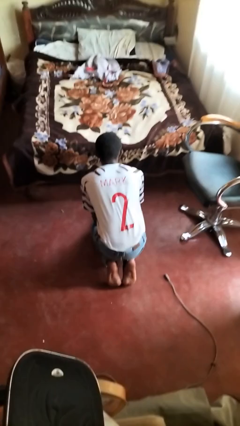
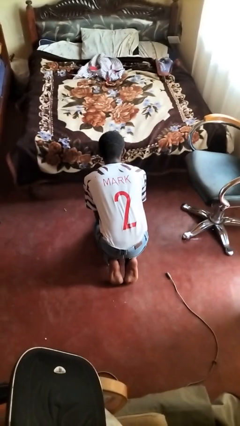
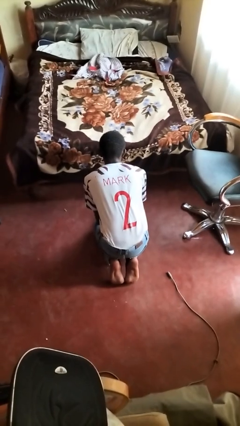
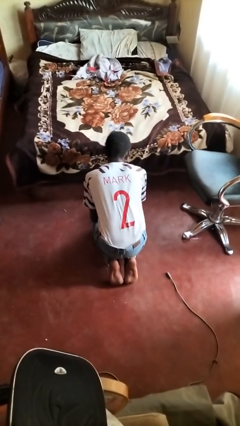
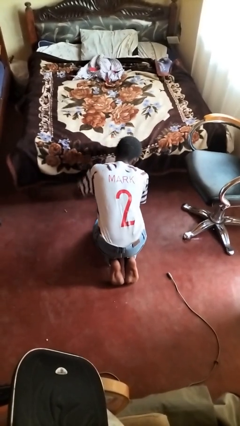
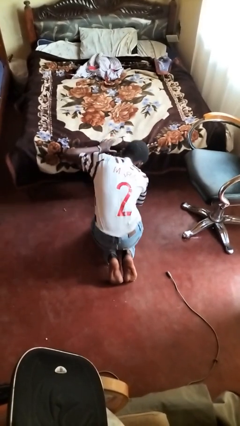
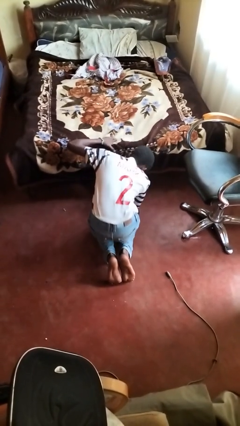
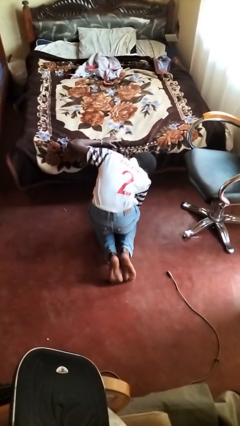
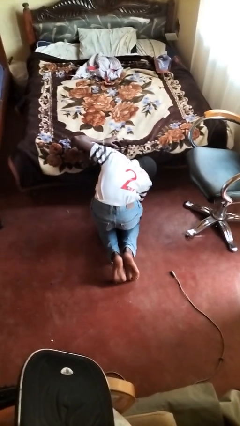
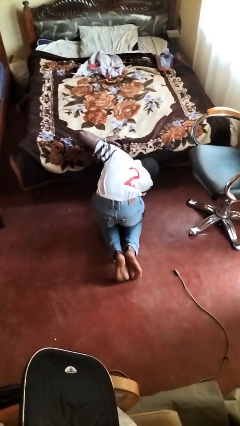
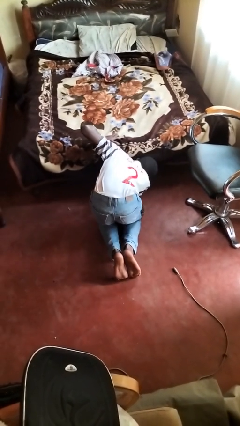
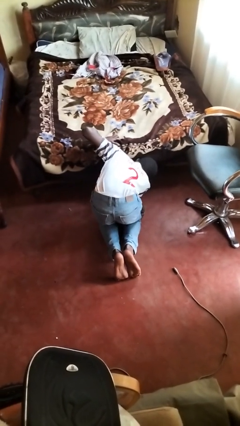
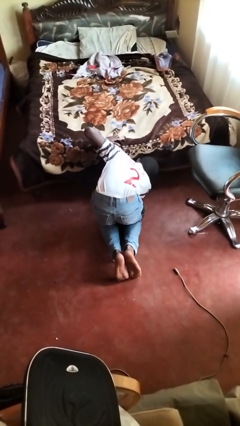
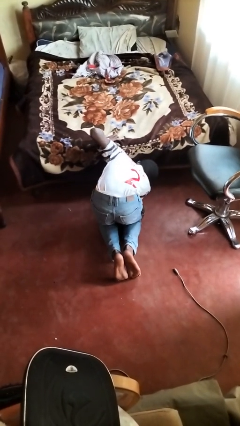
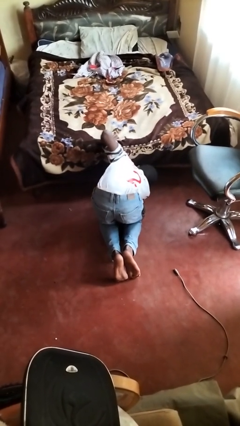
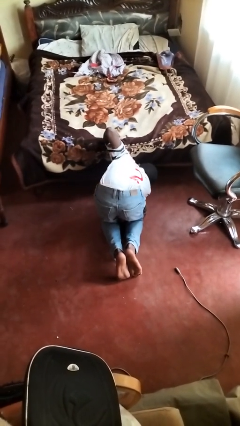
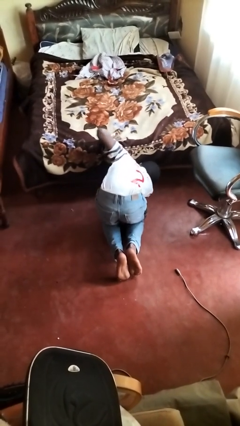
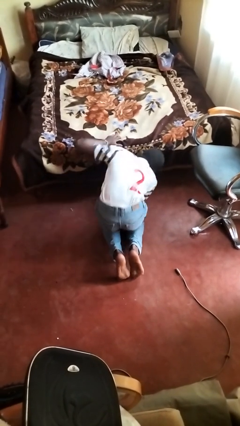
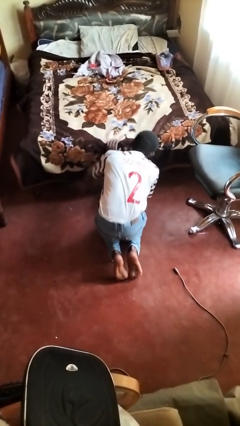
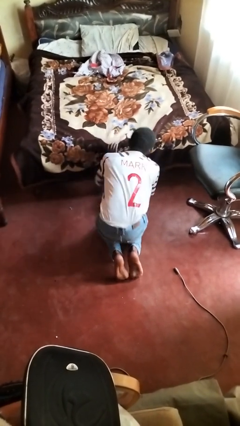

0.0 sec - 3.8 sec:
person searches under bed

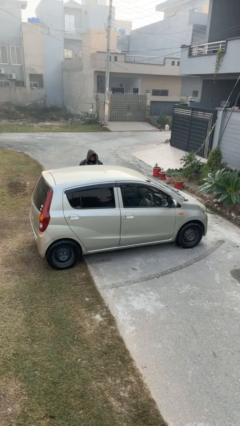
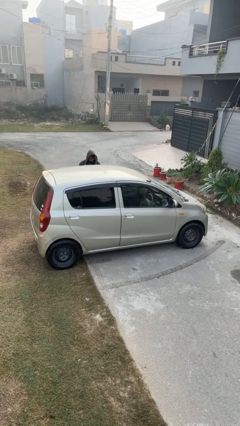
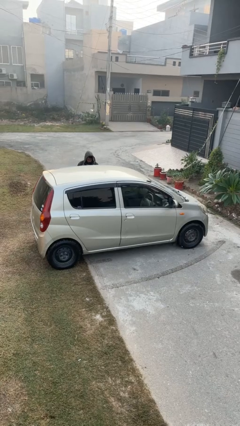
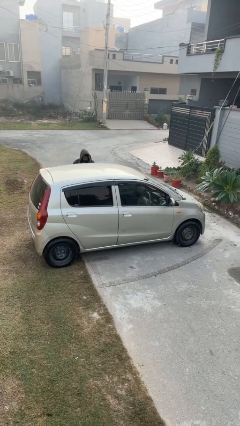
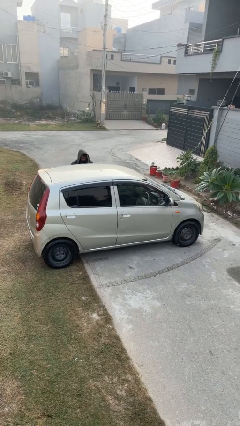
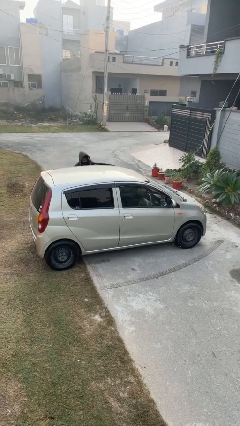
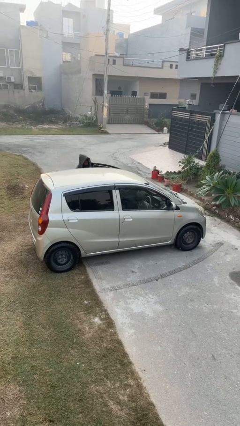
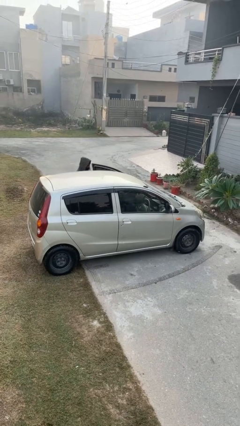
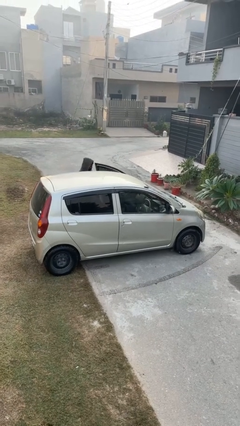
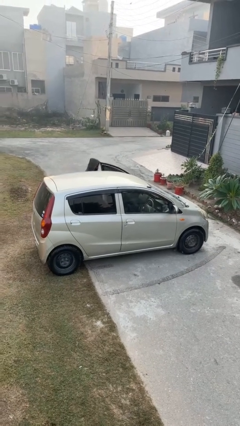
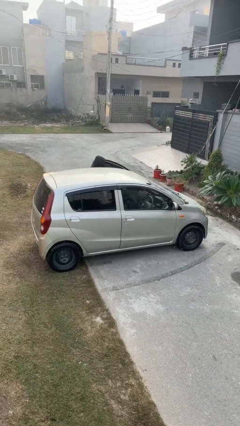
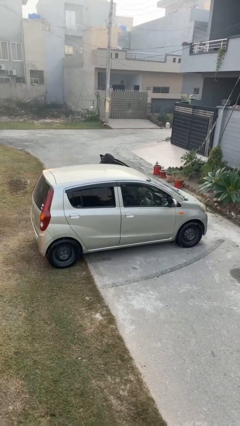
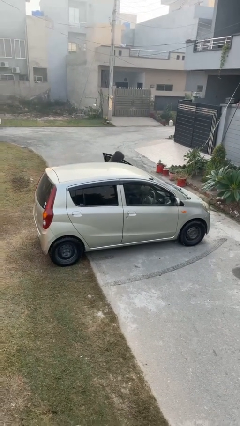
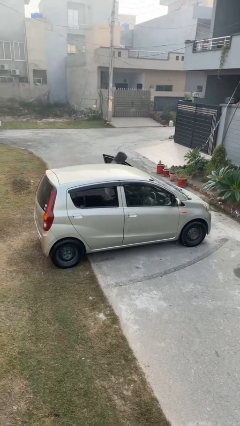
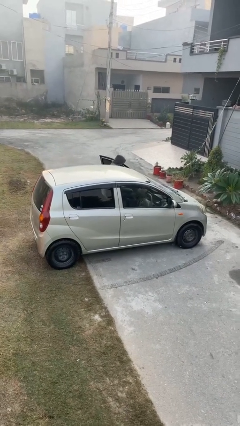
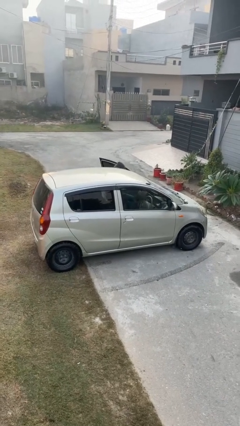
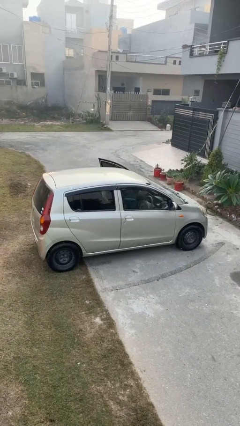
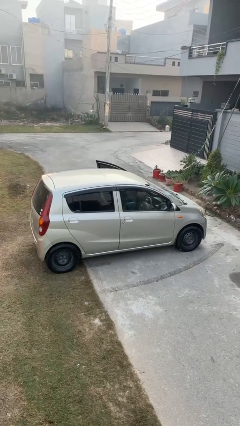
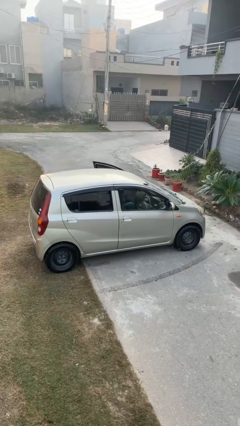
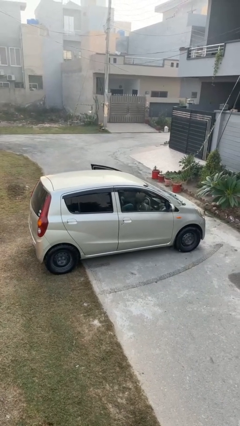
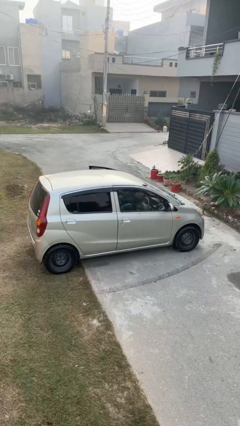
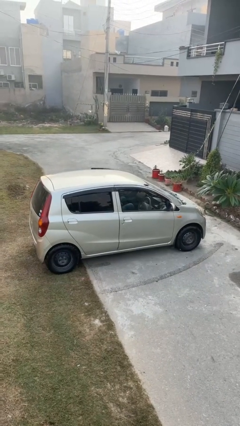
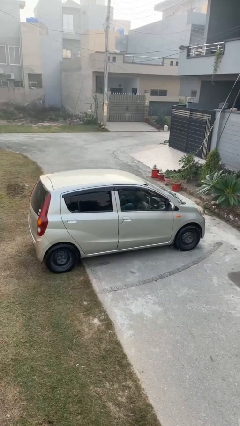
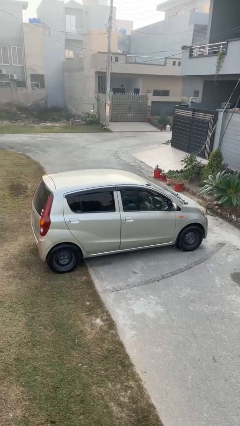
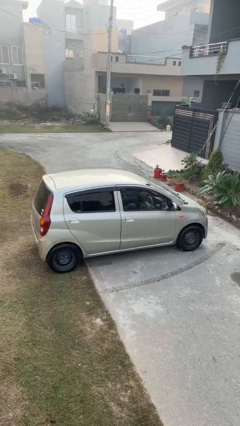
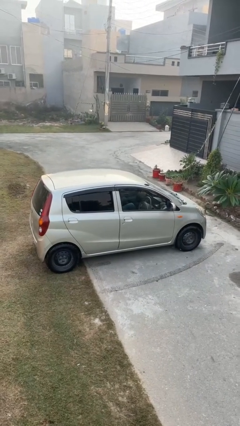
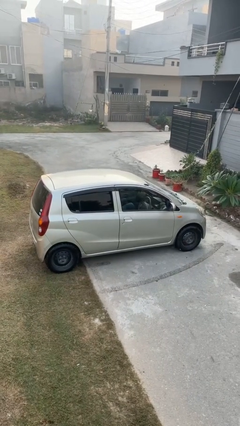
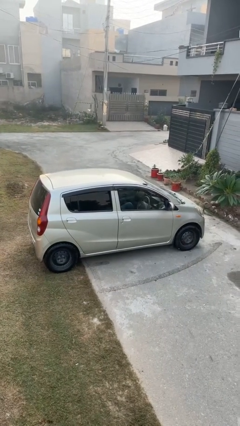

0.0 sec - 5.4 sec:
car picks up person

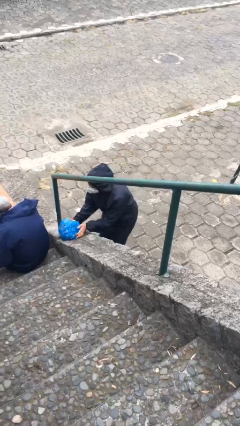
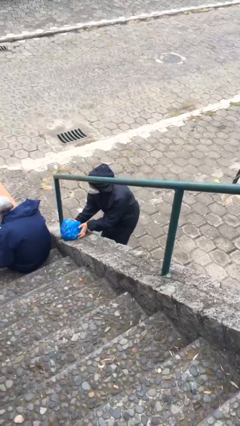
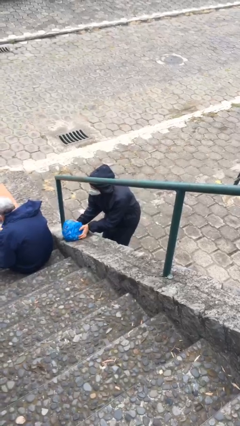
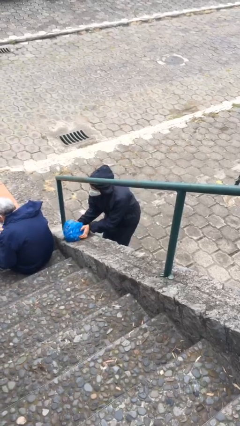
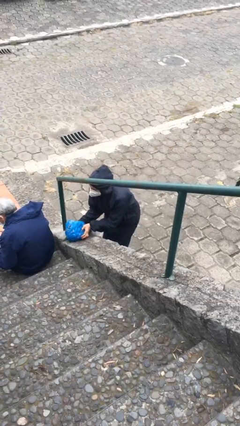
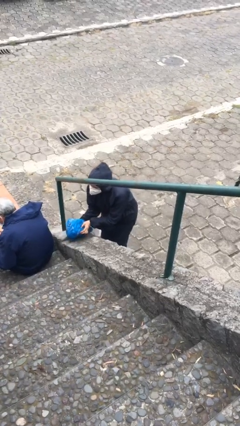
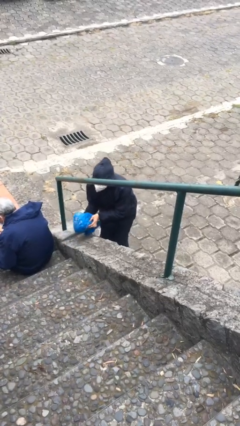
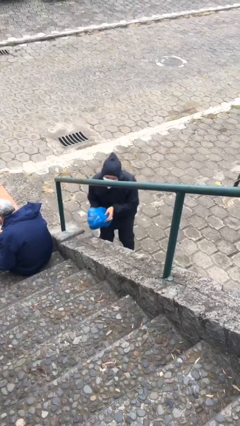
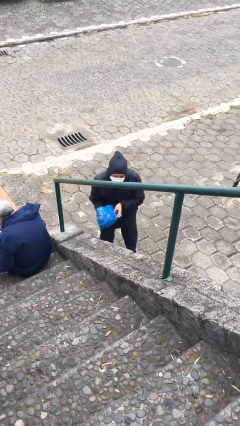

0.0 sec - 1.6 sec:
person steals object from person

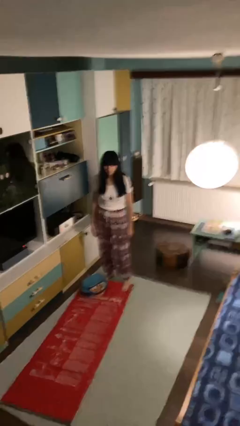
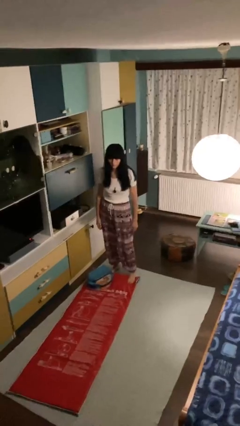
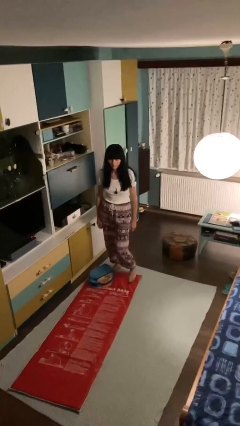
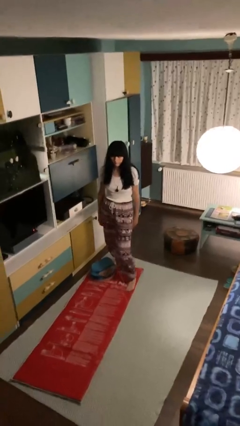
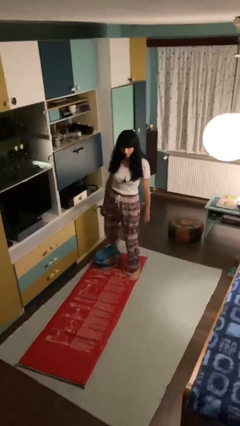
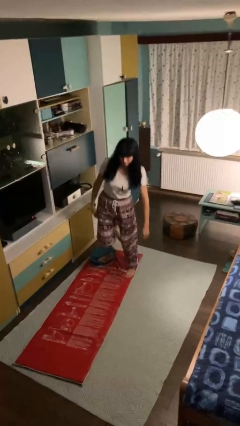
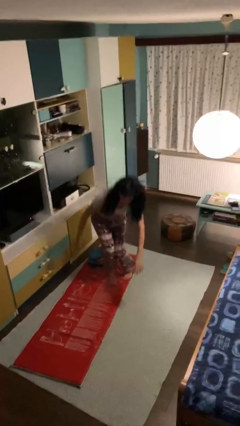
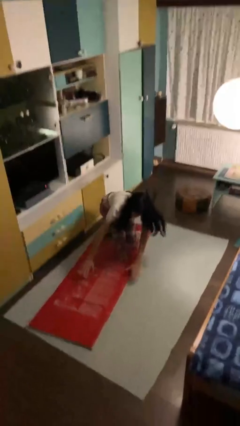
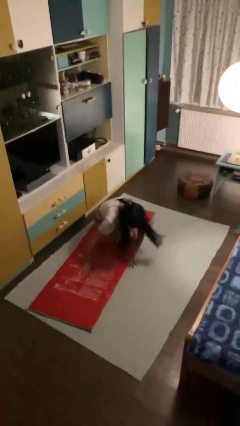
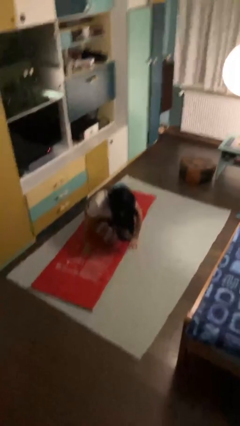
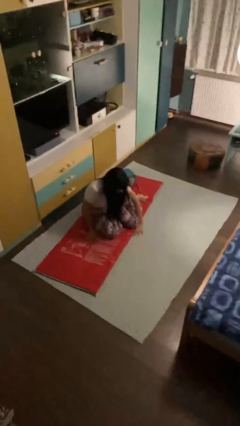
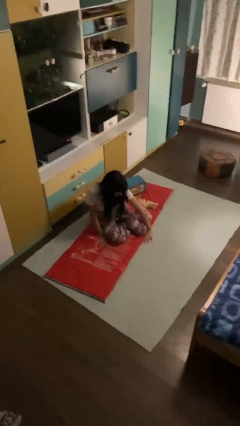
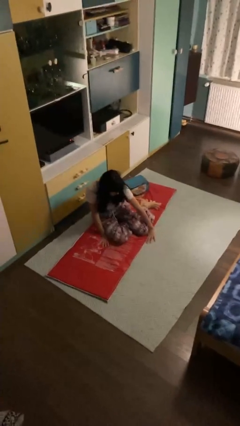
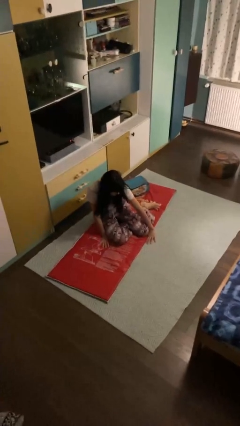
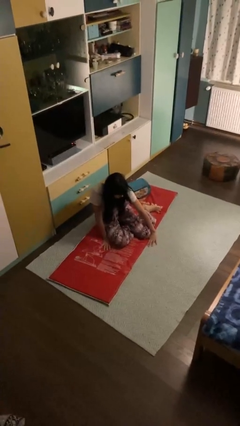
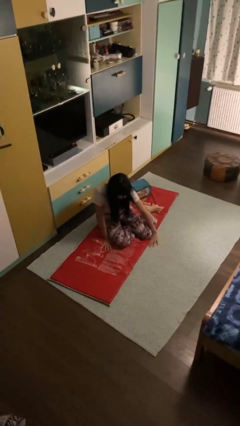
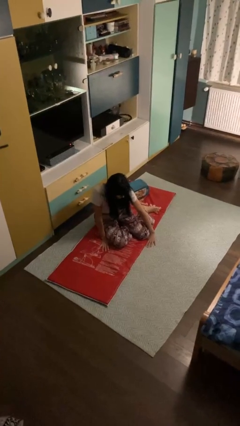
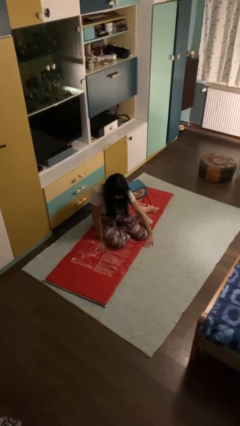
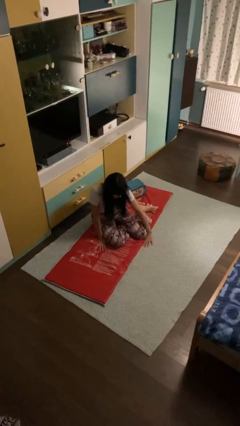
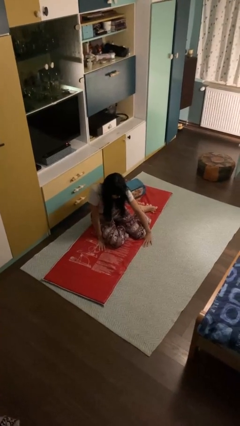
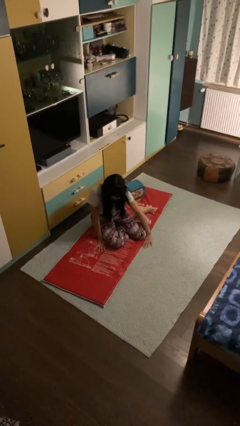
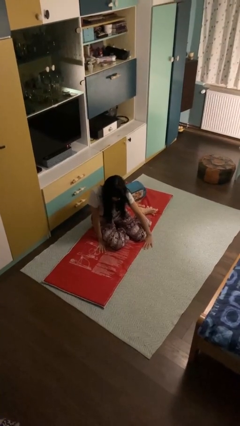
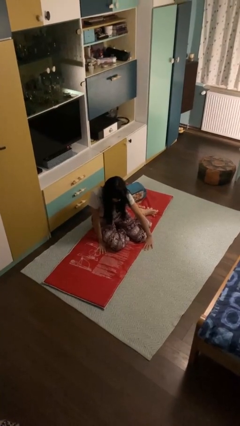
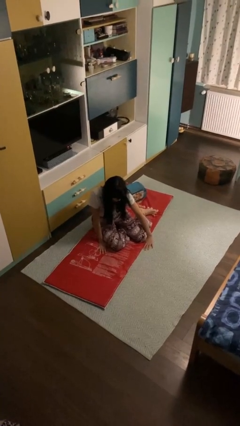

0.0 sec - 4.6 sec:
person trips on object on floor

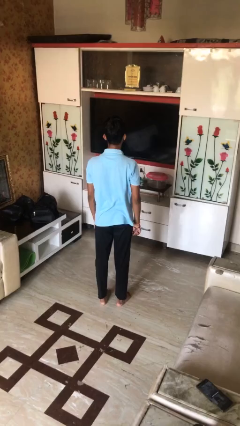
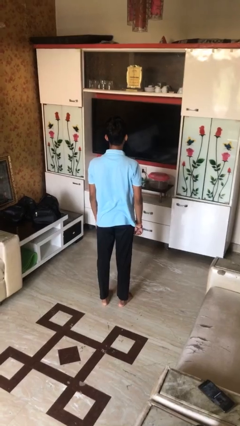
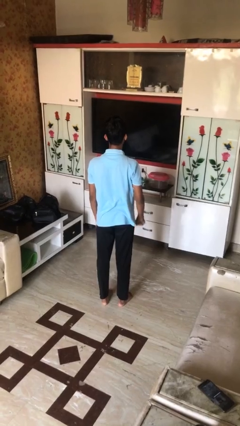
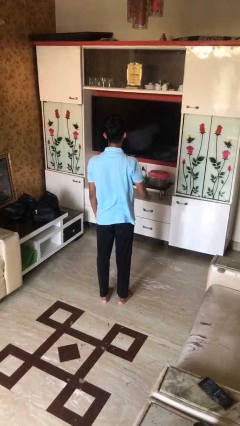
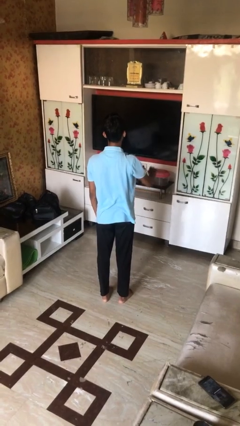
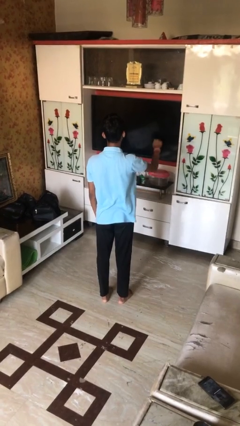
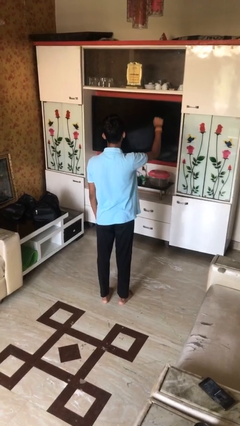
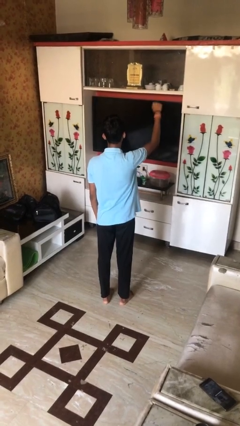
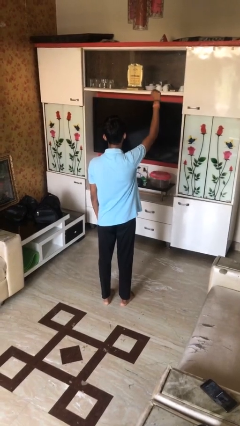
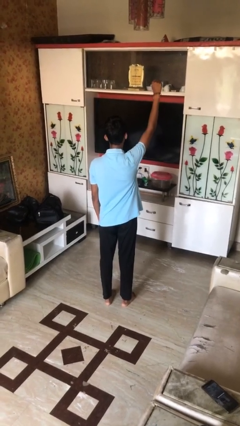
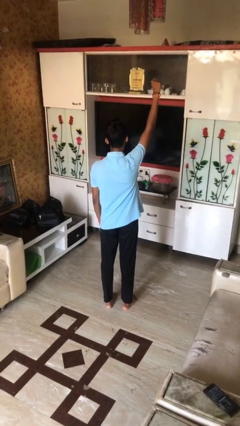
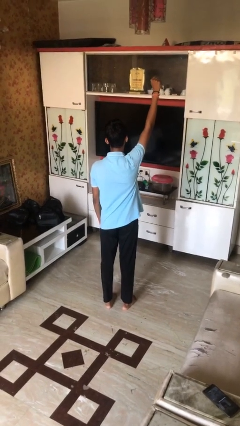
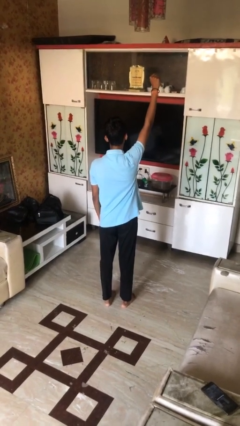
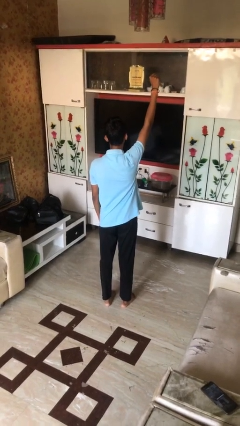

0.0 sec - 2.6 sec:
person gestures raise hand
